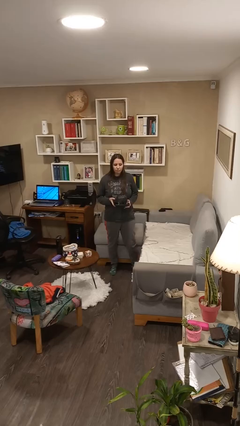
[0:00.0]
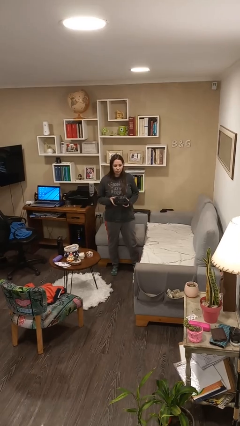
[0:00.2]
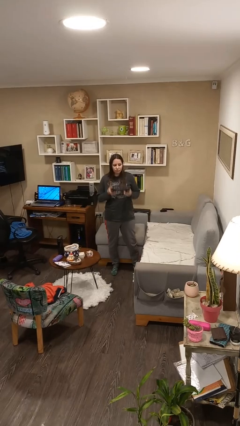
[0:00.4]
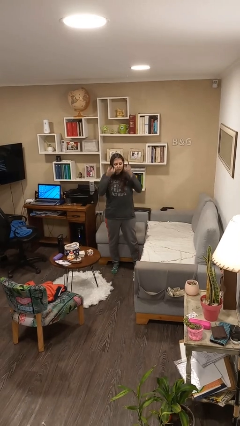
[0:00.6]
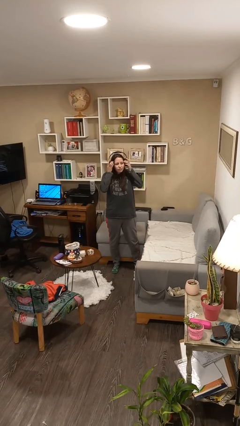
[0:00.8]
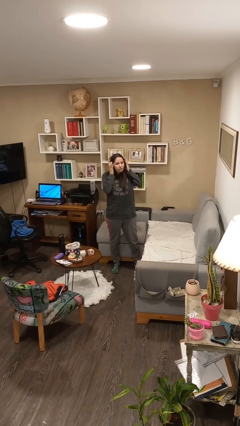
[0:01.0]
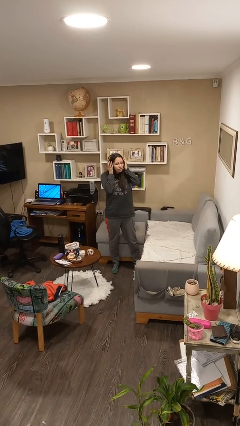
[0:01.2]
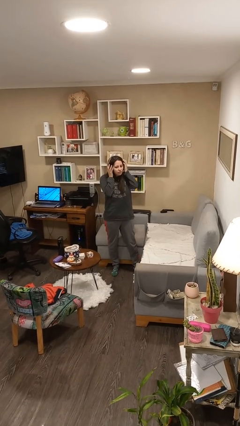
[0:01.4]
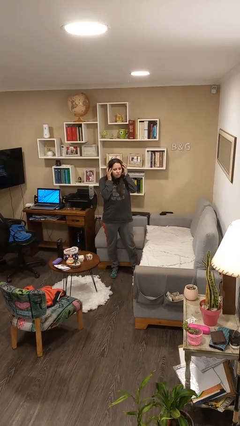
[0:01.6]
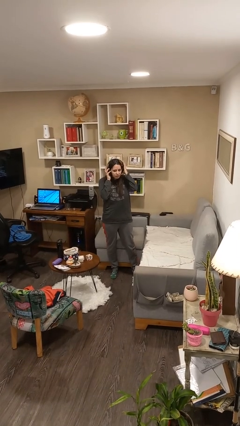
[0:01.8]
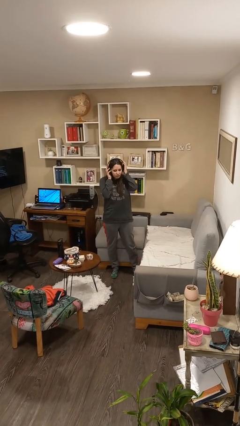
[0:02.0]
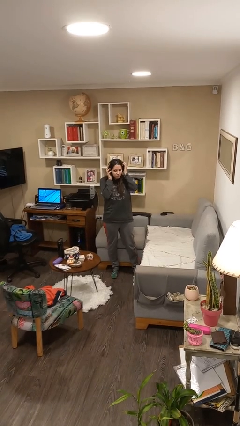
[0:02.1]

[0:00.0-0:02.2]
person puts on headphones

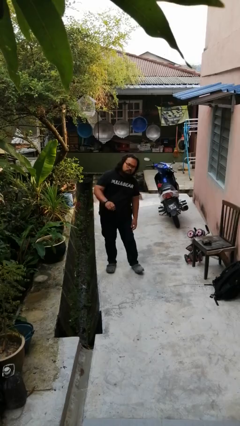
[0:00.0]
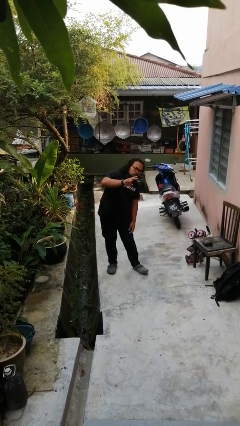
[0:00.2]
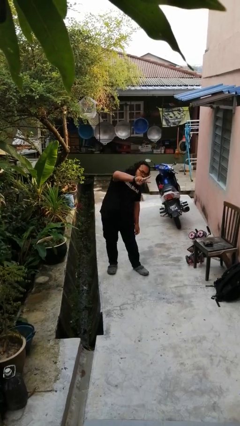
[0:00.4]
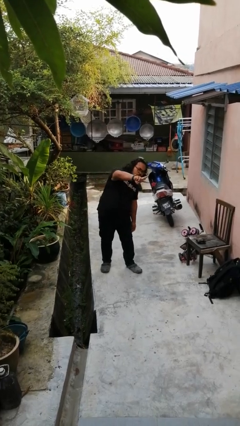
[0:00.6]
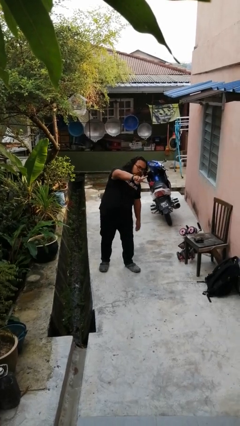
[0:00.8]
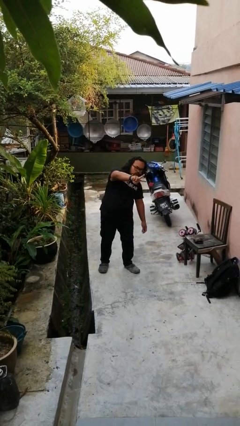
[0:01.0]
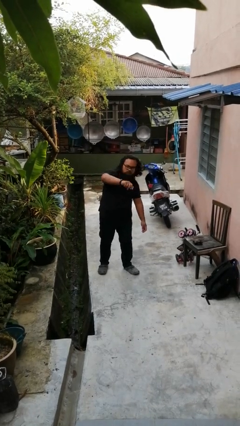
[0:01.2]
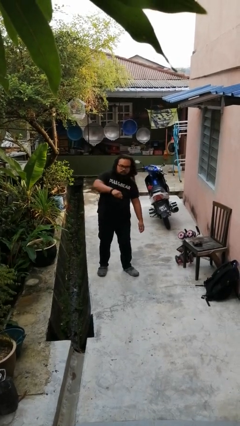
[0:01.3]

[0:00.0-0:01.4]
person gestures peace

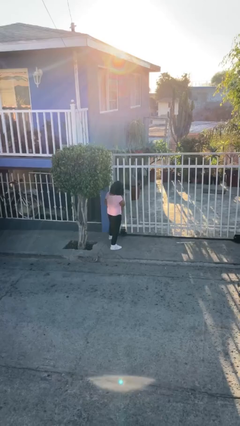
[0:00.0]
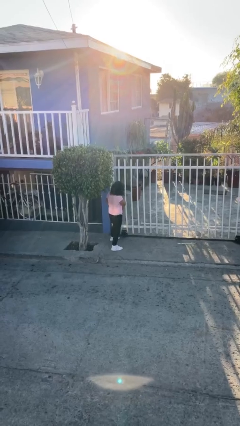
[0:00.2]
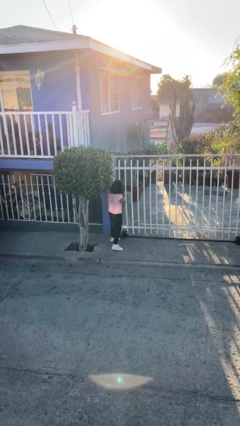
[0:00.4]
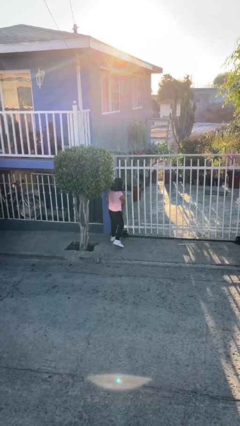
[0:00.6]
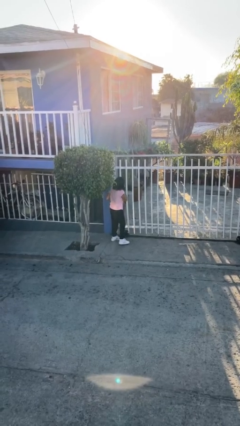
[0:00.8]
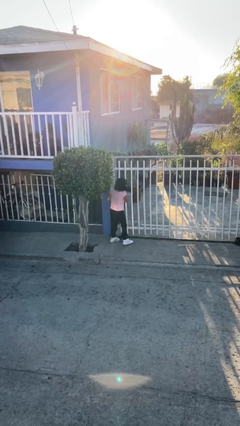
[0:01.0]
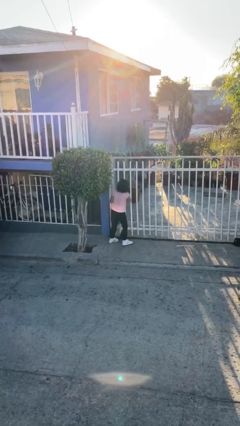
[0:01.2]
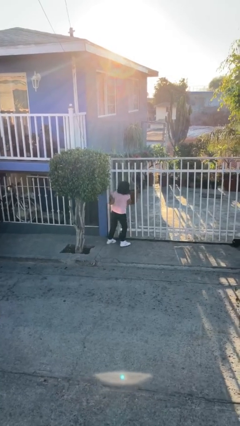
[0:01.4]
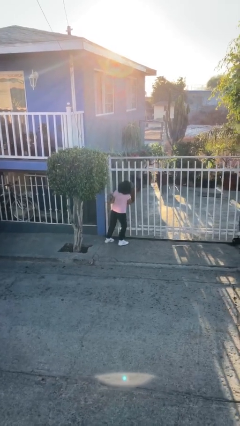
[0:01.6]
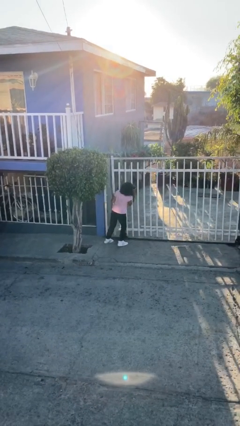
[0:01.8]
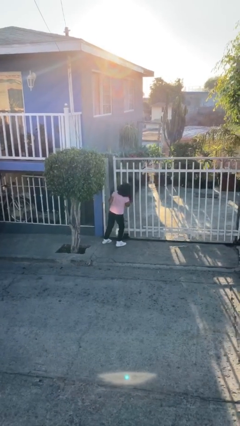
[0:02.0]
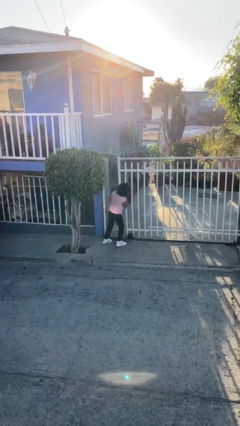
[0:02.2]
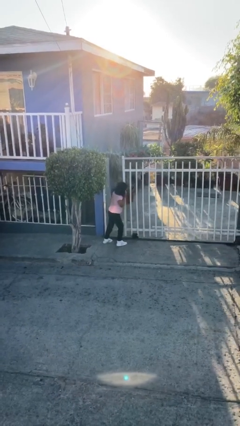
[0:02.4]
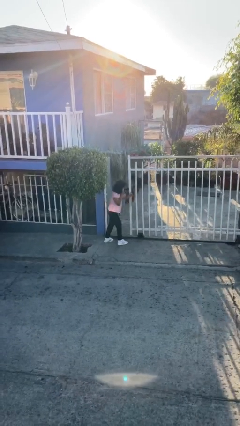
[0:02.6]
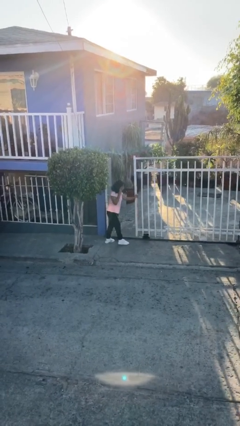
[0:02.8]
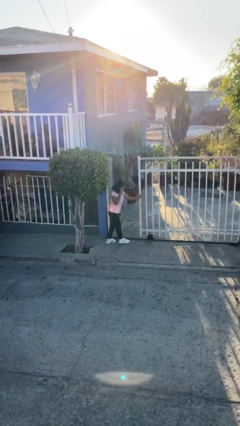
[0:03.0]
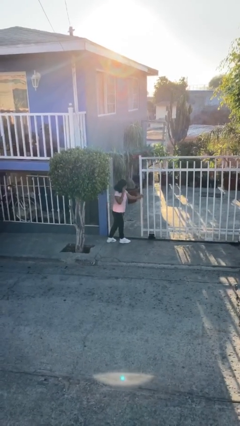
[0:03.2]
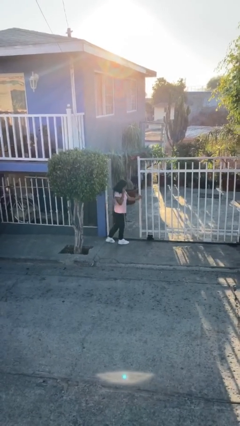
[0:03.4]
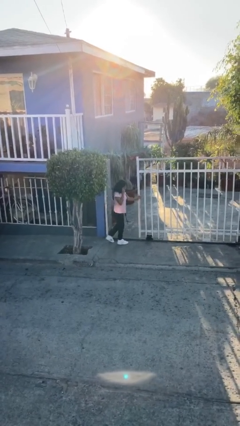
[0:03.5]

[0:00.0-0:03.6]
person opens facility door

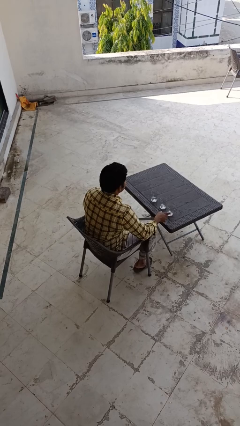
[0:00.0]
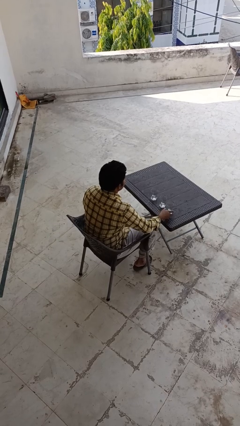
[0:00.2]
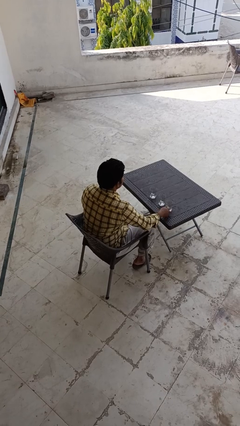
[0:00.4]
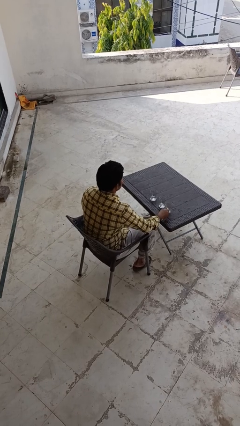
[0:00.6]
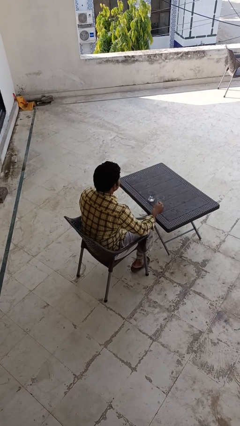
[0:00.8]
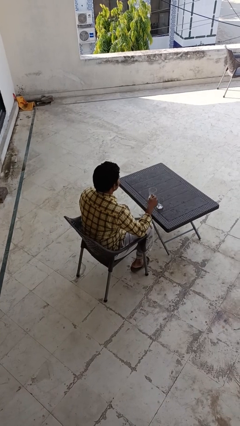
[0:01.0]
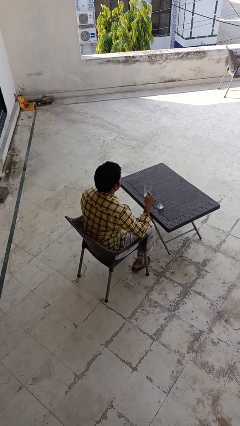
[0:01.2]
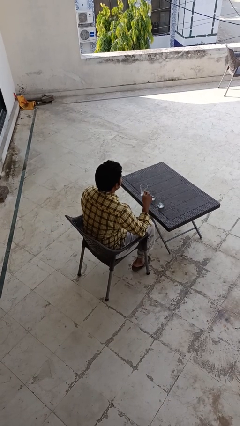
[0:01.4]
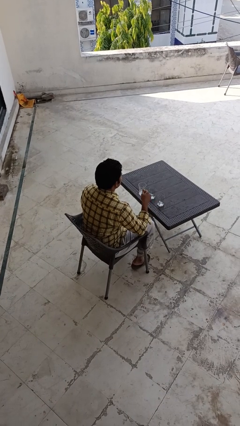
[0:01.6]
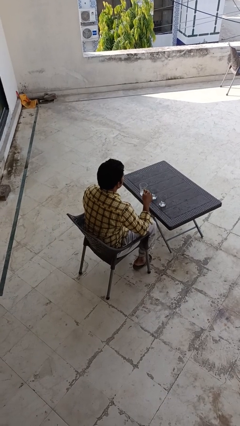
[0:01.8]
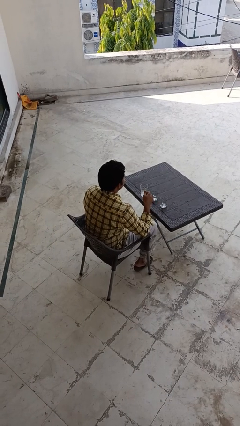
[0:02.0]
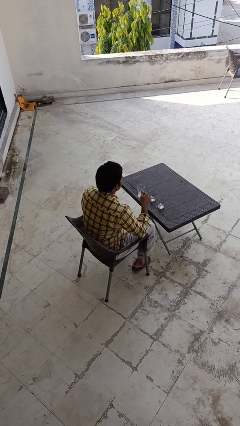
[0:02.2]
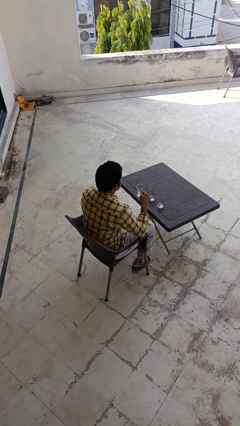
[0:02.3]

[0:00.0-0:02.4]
person picks up object from table

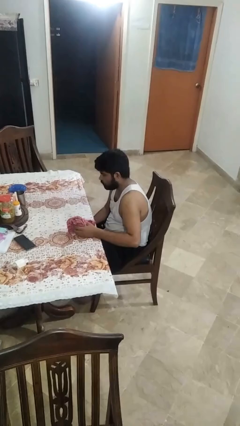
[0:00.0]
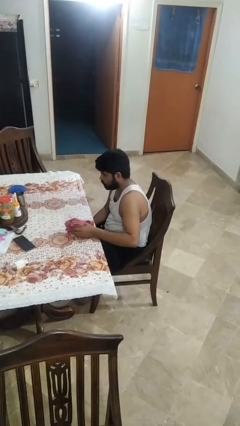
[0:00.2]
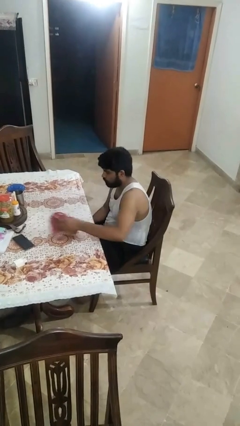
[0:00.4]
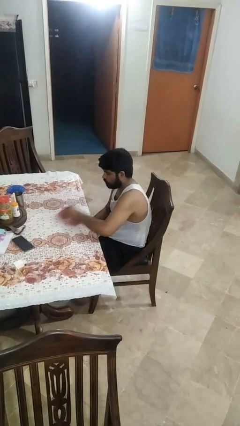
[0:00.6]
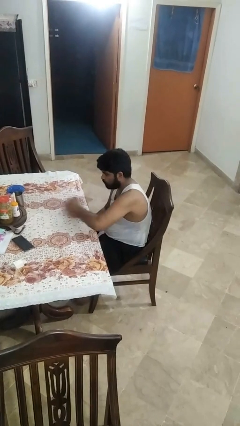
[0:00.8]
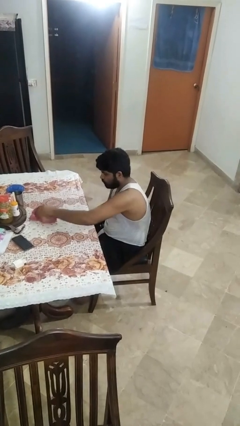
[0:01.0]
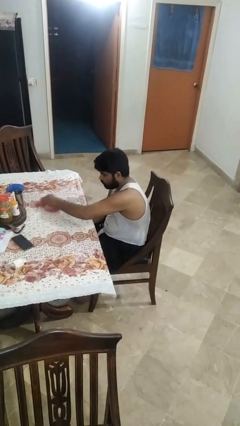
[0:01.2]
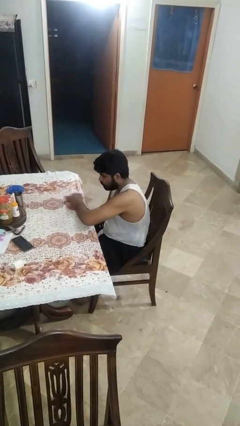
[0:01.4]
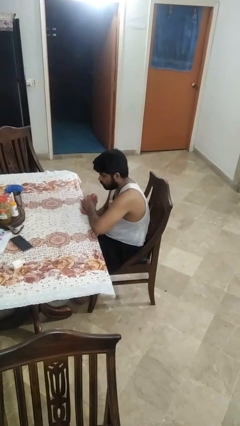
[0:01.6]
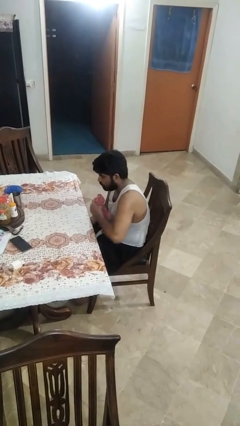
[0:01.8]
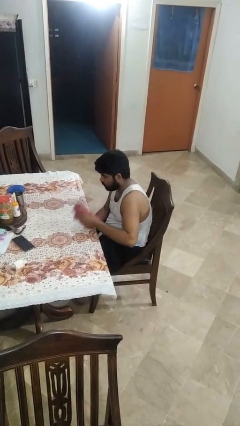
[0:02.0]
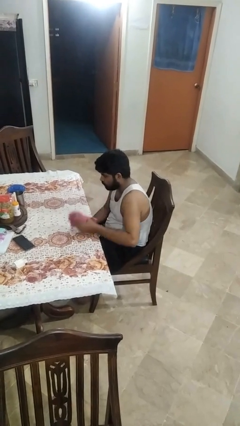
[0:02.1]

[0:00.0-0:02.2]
person cleans table with rag

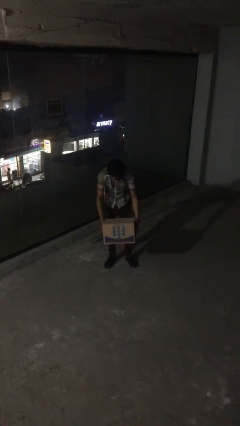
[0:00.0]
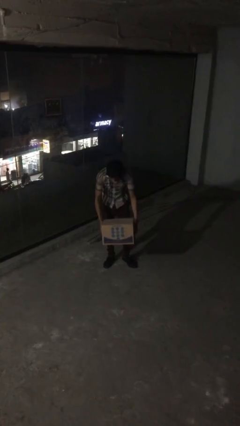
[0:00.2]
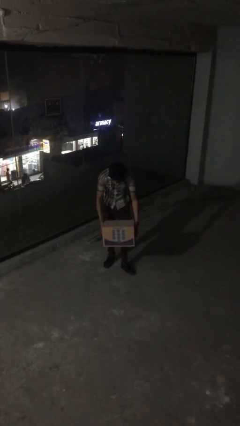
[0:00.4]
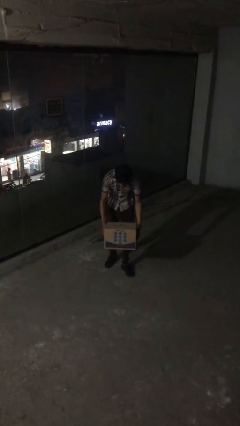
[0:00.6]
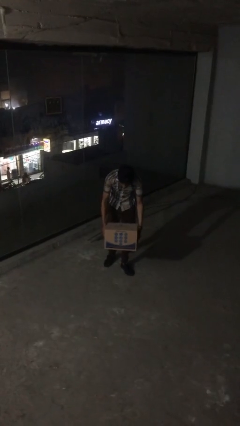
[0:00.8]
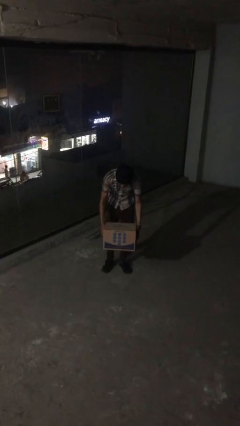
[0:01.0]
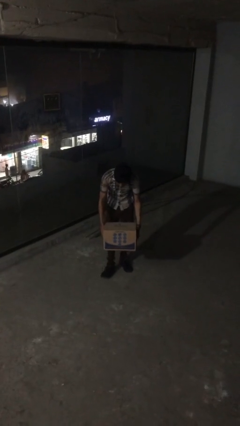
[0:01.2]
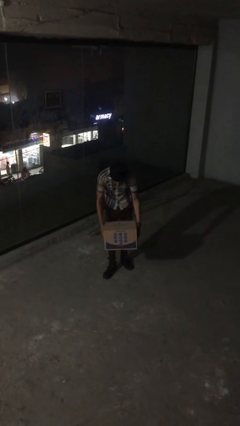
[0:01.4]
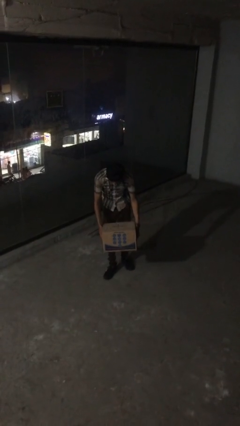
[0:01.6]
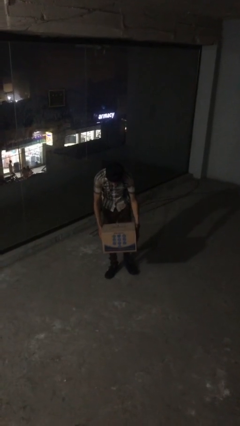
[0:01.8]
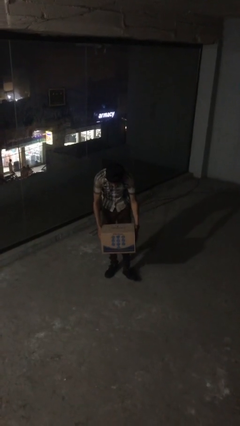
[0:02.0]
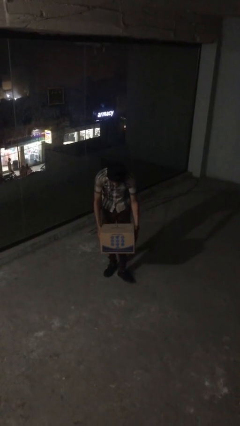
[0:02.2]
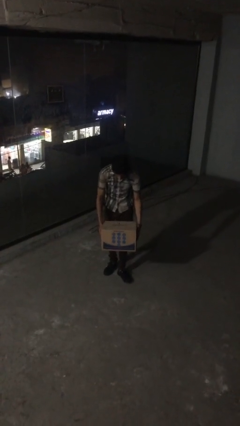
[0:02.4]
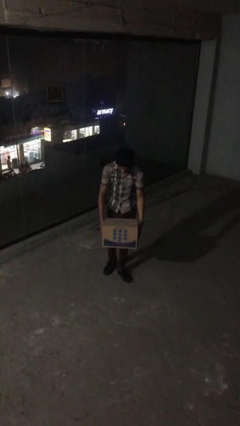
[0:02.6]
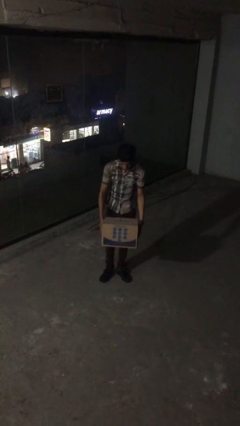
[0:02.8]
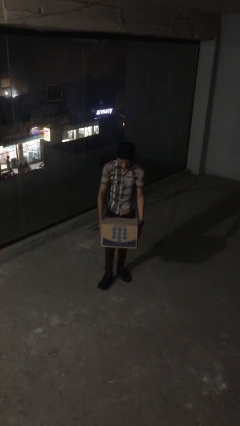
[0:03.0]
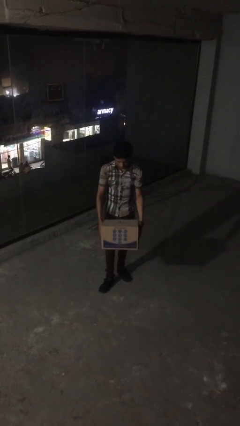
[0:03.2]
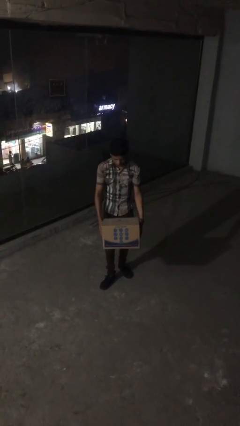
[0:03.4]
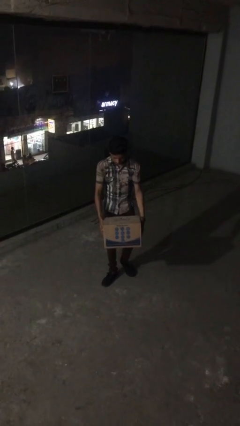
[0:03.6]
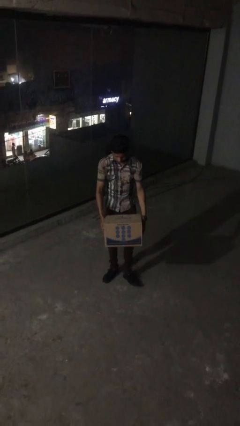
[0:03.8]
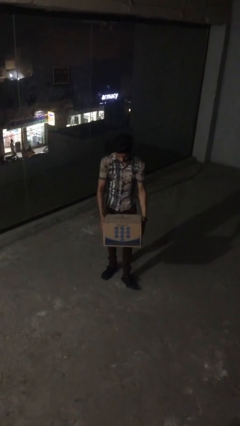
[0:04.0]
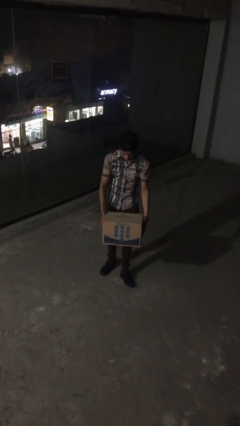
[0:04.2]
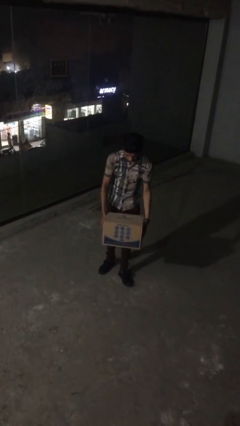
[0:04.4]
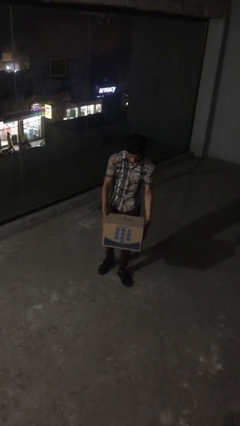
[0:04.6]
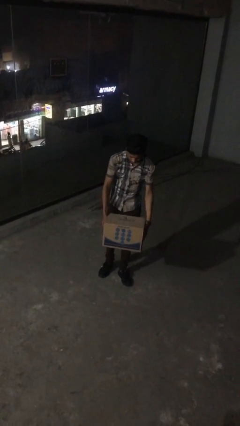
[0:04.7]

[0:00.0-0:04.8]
person carries heavy object

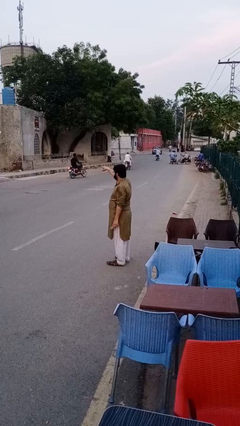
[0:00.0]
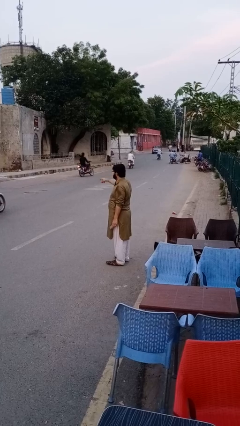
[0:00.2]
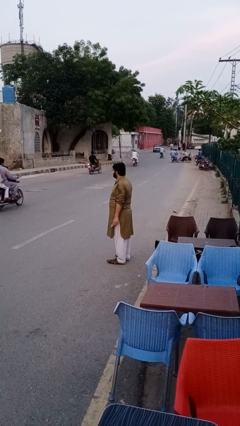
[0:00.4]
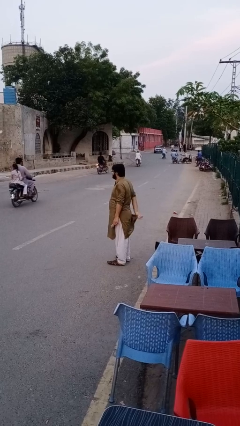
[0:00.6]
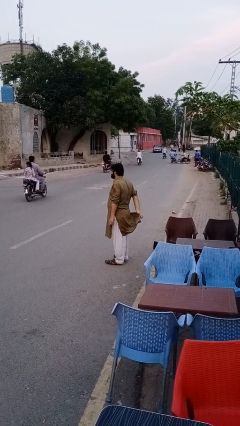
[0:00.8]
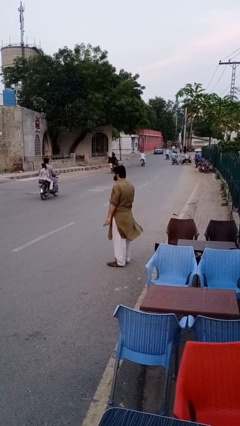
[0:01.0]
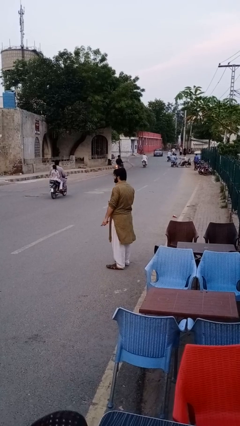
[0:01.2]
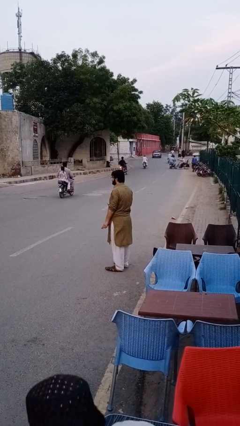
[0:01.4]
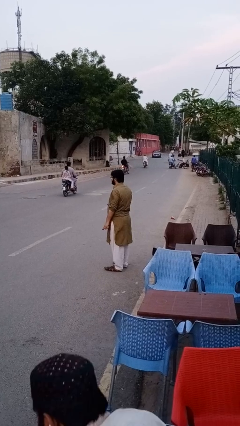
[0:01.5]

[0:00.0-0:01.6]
person puts phone into pocket
